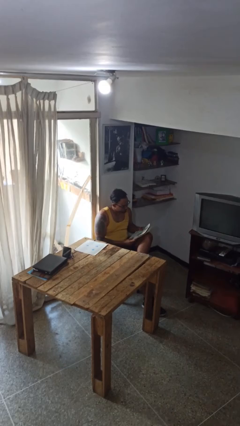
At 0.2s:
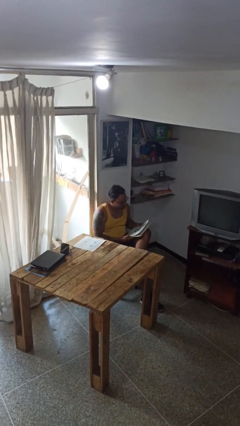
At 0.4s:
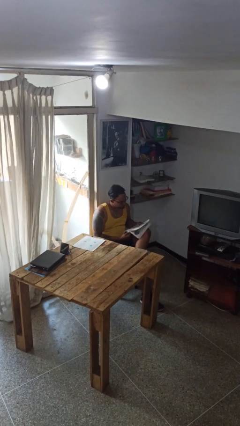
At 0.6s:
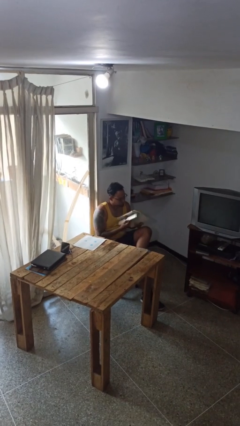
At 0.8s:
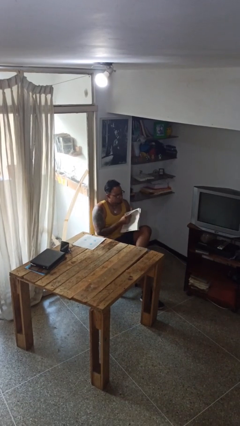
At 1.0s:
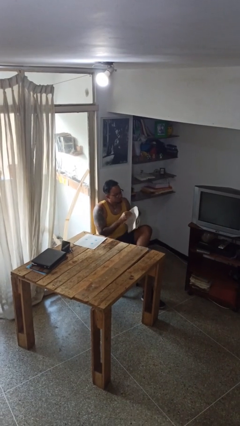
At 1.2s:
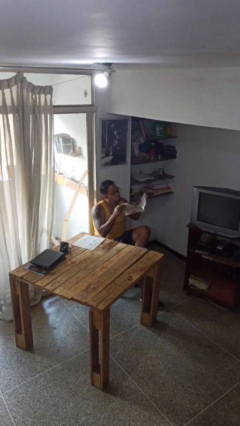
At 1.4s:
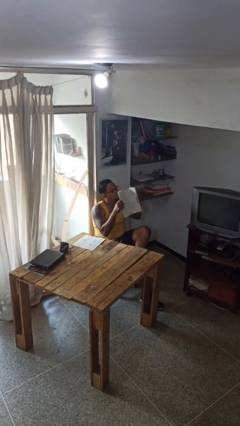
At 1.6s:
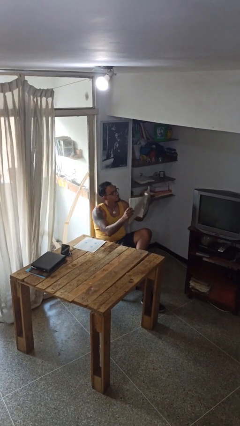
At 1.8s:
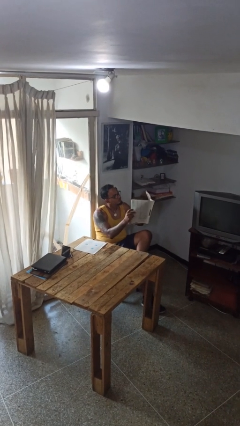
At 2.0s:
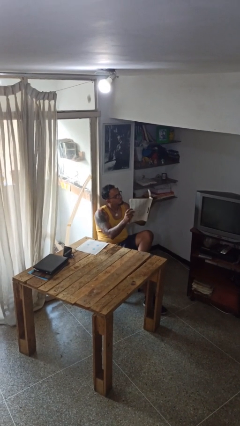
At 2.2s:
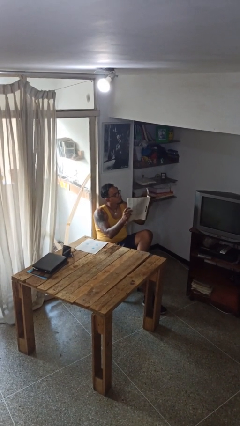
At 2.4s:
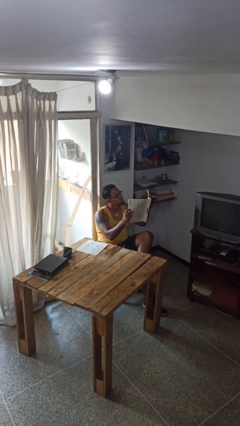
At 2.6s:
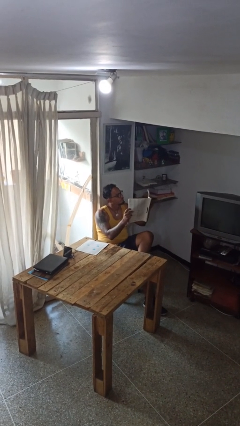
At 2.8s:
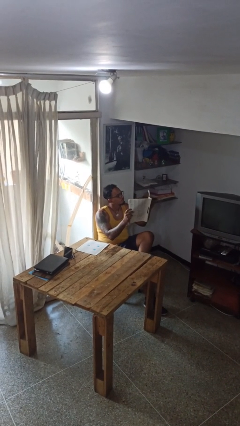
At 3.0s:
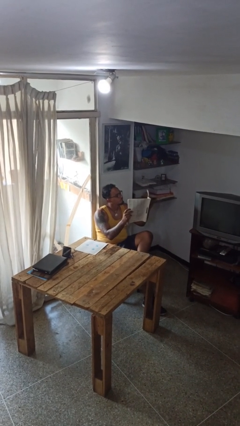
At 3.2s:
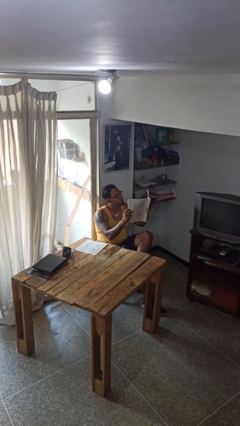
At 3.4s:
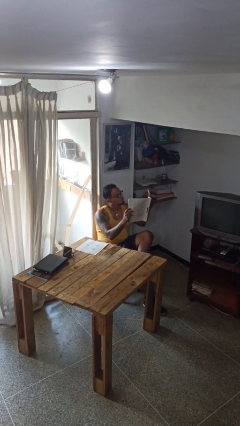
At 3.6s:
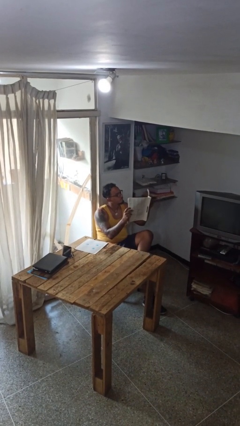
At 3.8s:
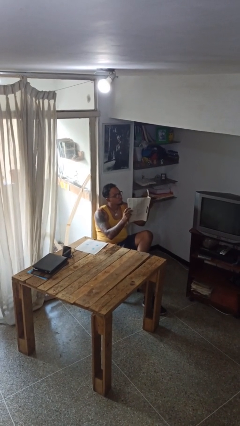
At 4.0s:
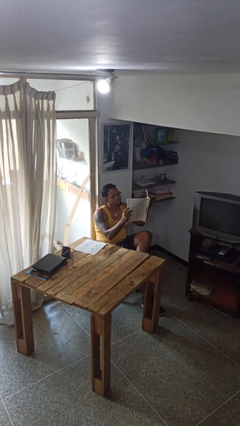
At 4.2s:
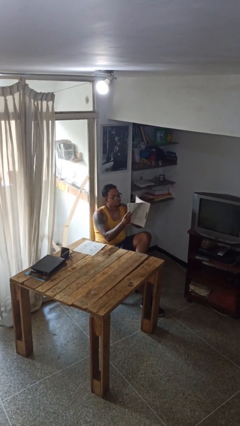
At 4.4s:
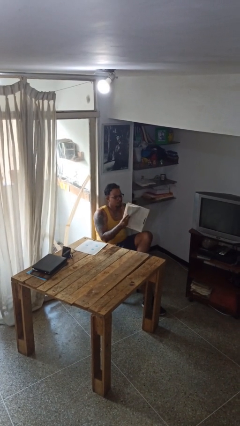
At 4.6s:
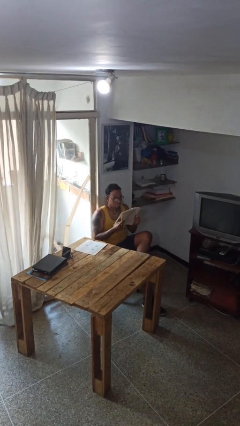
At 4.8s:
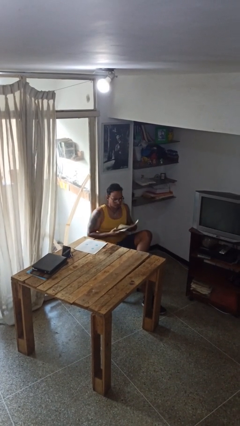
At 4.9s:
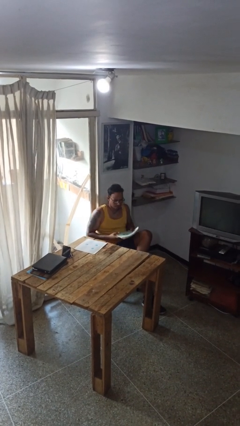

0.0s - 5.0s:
person reads document

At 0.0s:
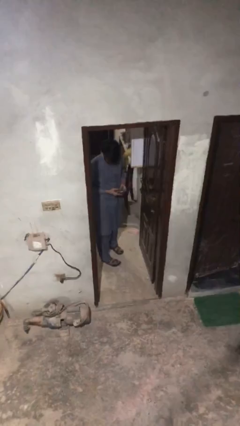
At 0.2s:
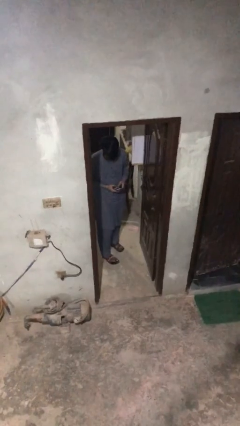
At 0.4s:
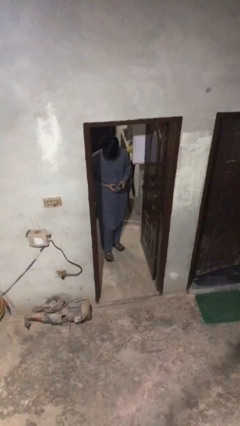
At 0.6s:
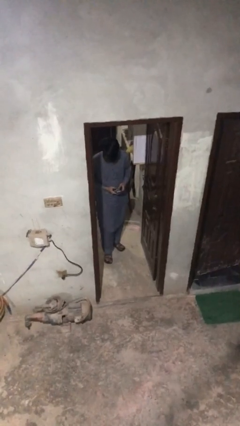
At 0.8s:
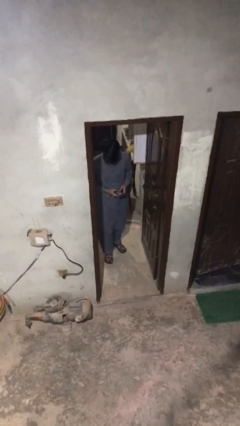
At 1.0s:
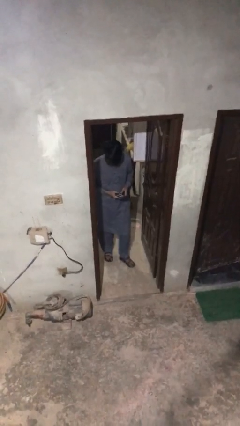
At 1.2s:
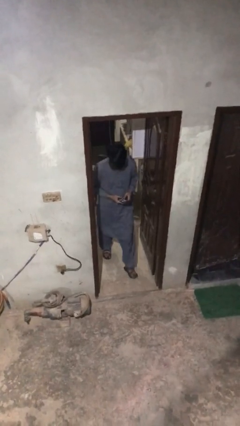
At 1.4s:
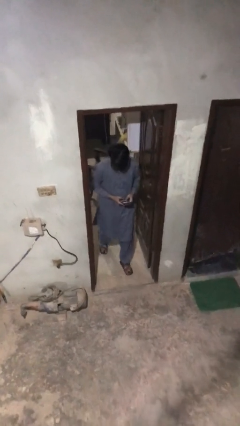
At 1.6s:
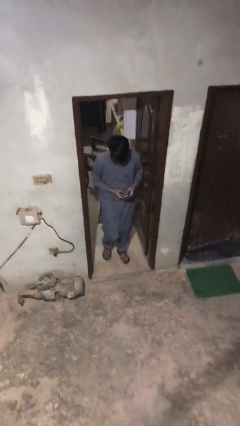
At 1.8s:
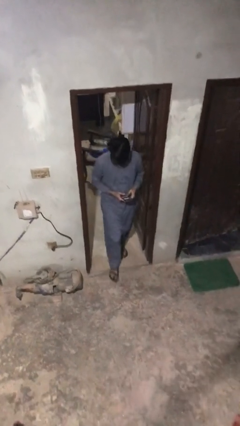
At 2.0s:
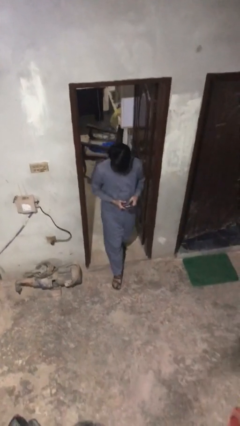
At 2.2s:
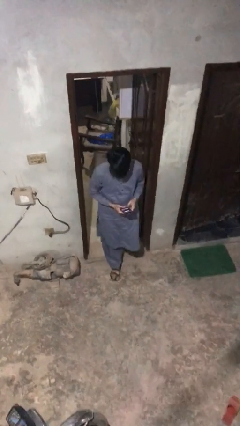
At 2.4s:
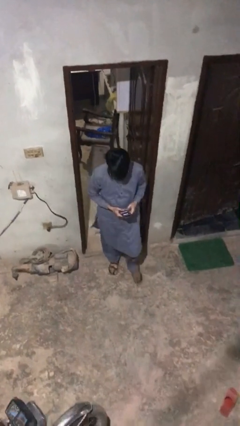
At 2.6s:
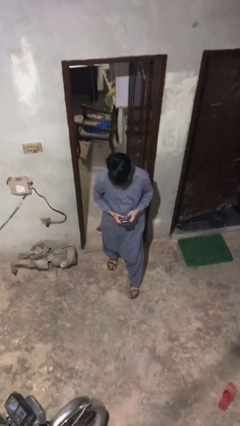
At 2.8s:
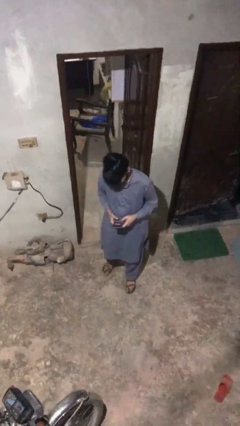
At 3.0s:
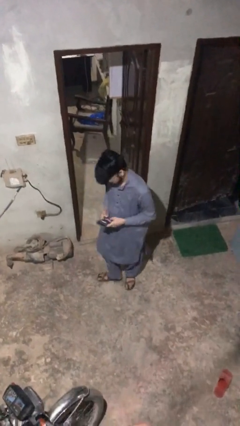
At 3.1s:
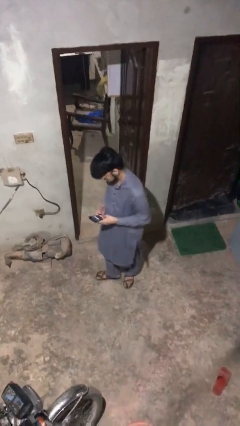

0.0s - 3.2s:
person exits scene through structure

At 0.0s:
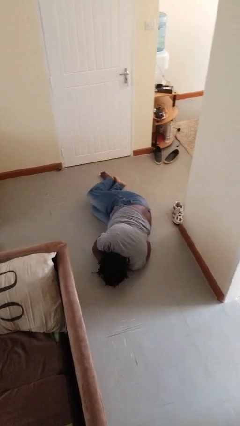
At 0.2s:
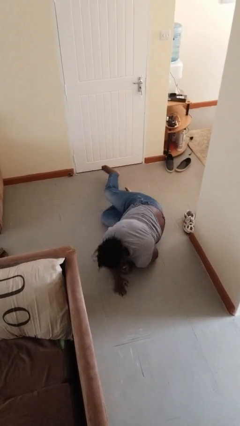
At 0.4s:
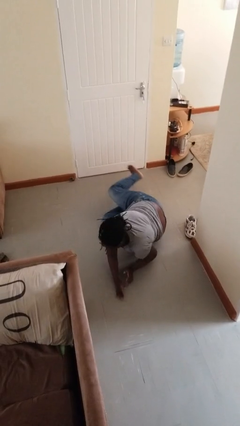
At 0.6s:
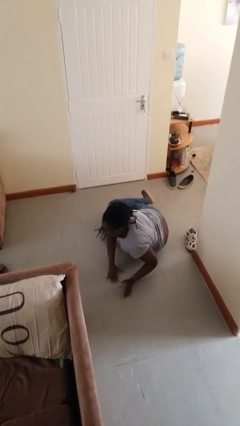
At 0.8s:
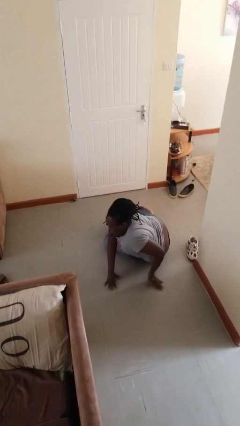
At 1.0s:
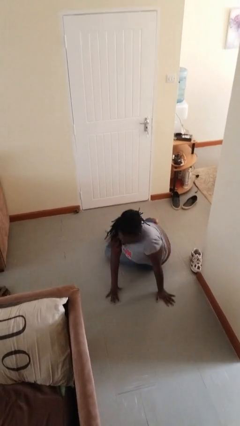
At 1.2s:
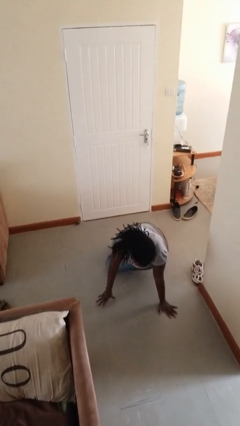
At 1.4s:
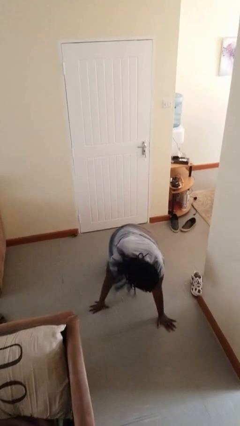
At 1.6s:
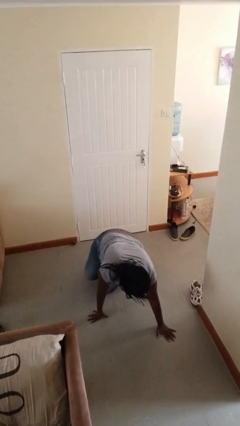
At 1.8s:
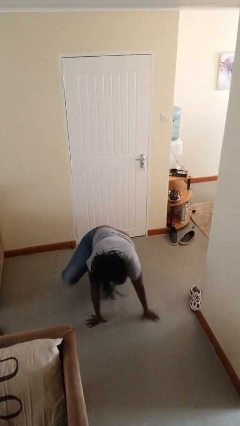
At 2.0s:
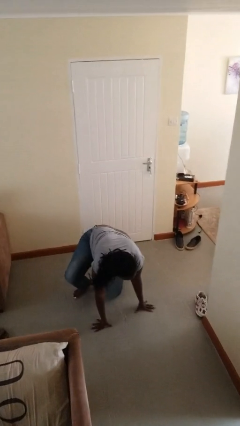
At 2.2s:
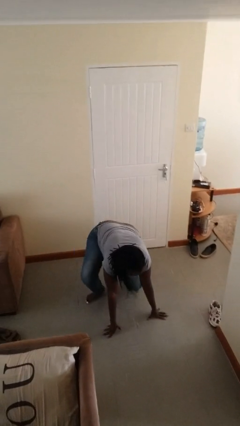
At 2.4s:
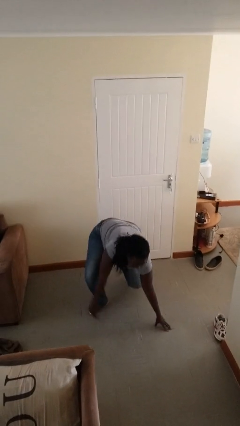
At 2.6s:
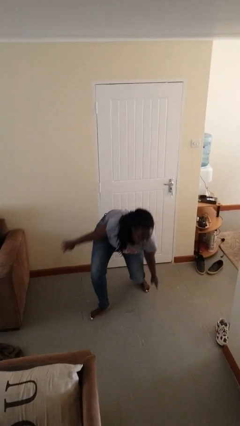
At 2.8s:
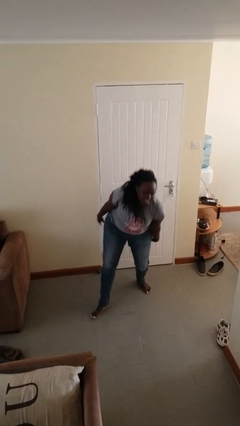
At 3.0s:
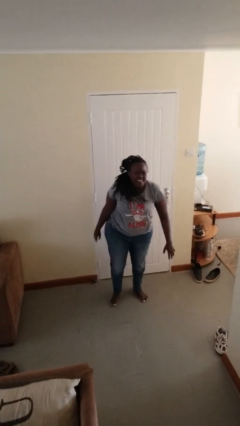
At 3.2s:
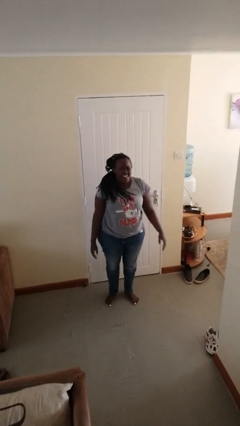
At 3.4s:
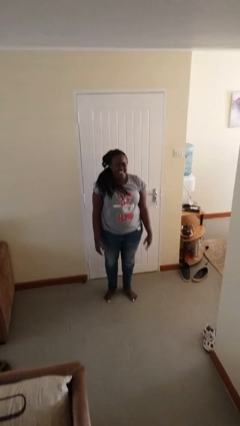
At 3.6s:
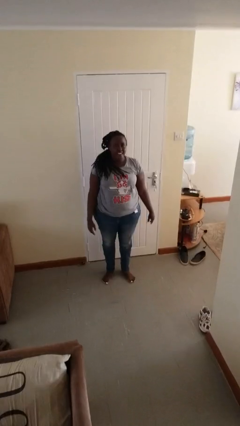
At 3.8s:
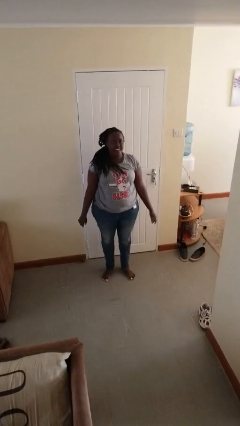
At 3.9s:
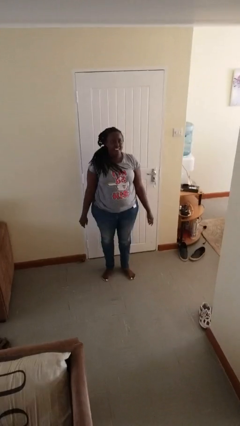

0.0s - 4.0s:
person stands up from floor

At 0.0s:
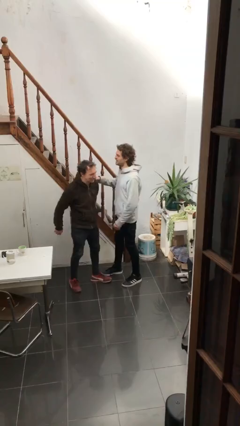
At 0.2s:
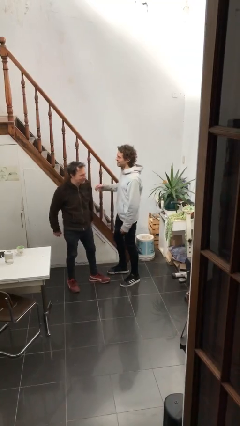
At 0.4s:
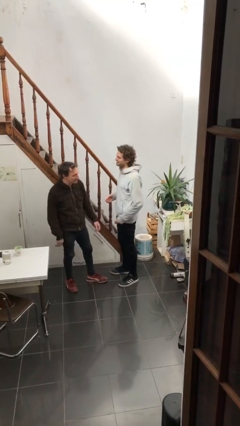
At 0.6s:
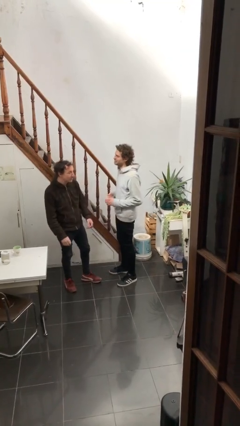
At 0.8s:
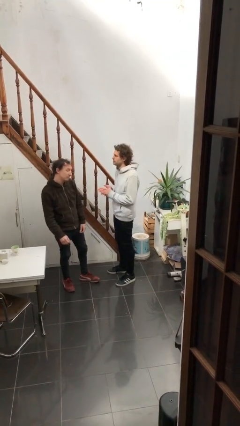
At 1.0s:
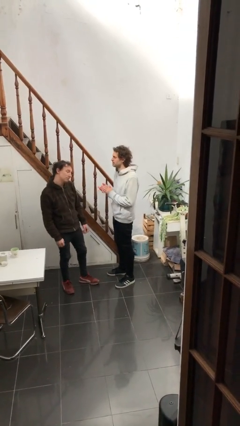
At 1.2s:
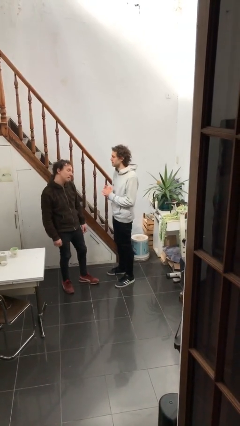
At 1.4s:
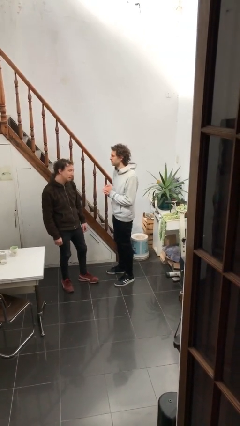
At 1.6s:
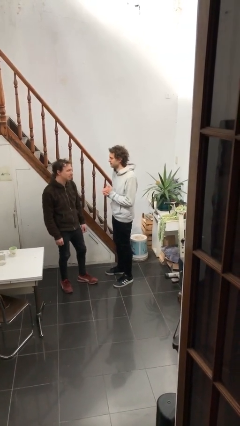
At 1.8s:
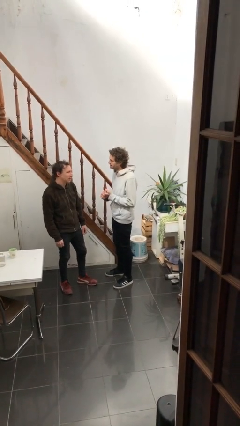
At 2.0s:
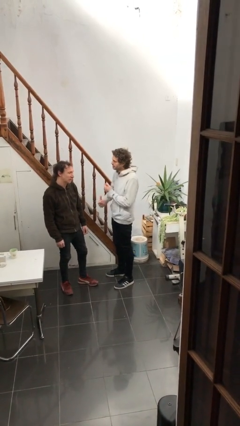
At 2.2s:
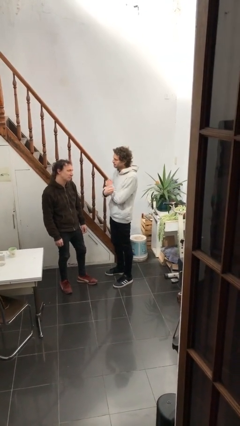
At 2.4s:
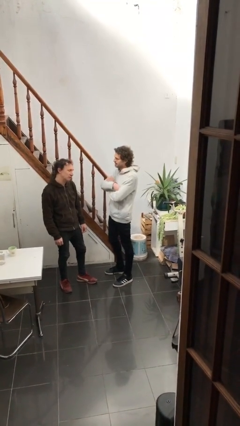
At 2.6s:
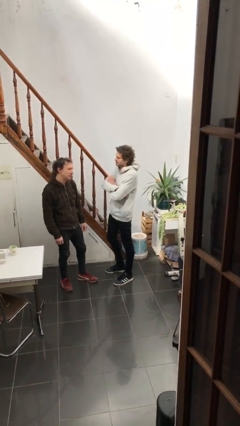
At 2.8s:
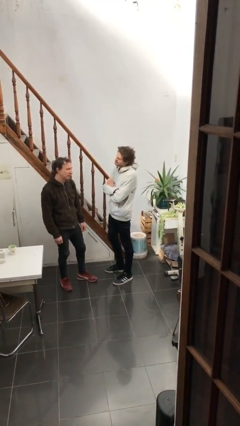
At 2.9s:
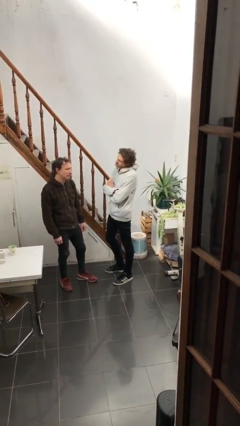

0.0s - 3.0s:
person talks to person

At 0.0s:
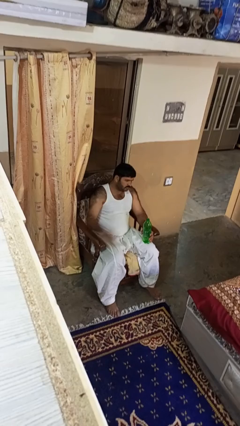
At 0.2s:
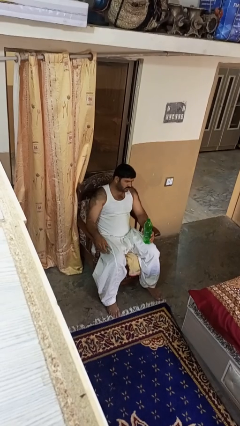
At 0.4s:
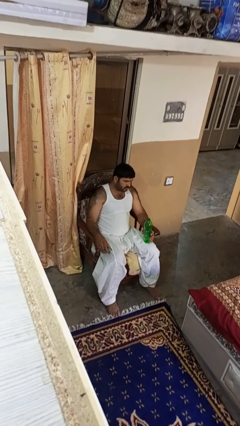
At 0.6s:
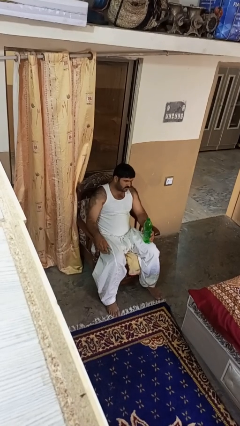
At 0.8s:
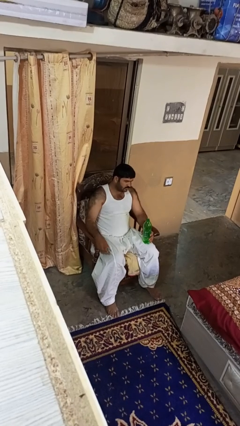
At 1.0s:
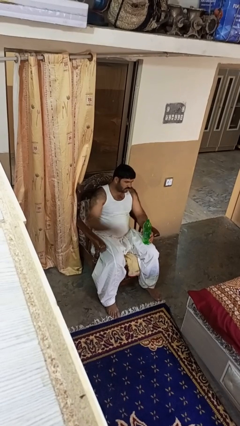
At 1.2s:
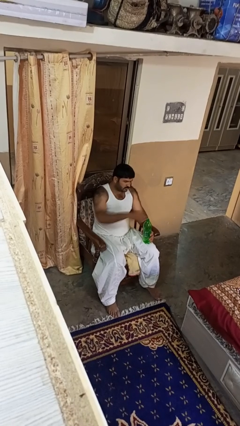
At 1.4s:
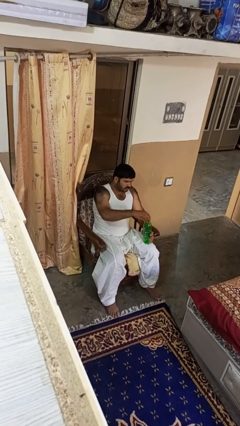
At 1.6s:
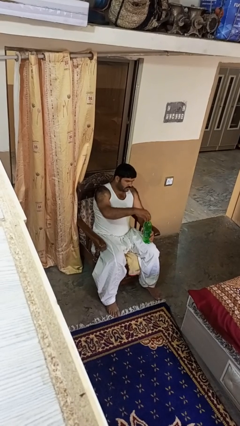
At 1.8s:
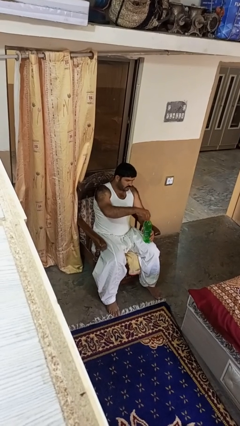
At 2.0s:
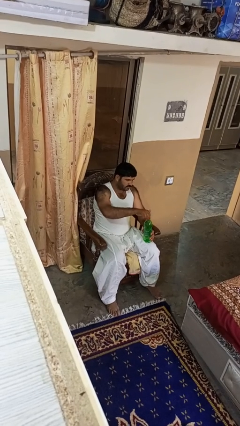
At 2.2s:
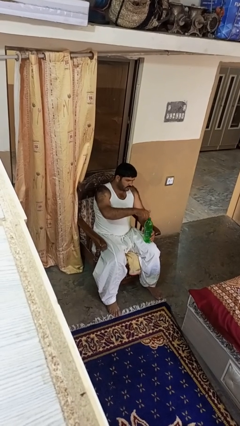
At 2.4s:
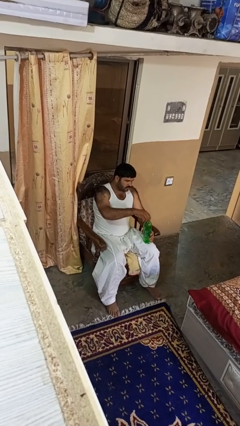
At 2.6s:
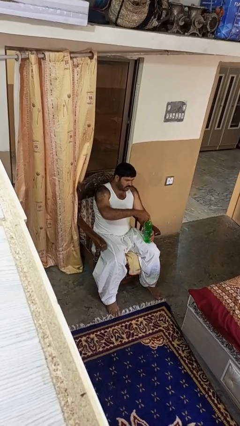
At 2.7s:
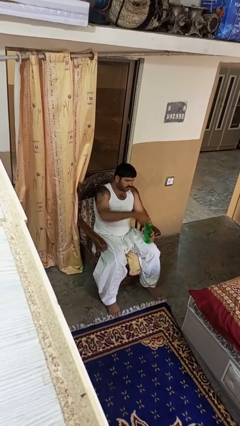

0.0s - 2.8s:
person screws lid to bottle
